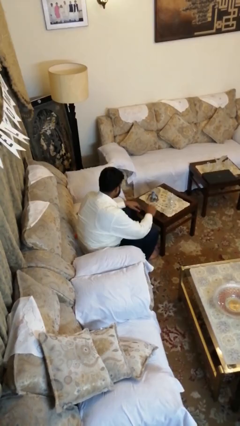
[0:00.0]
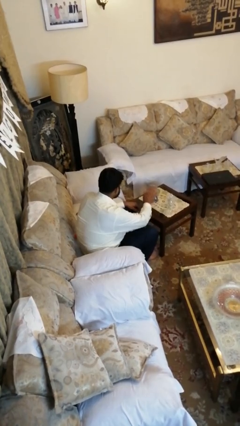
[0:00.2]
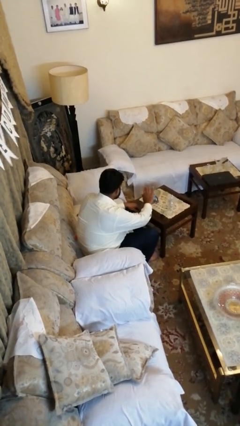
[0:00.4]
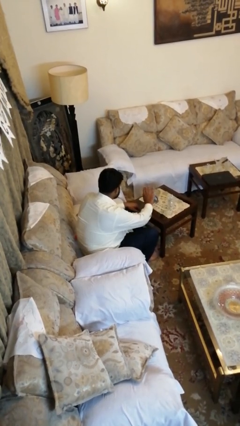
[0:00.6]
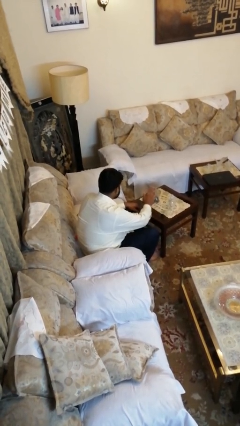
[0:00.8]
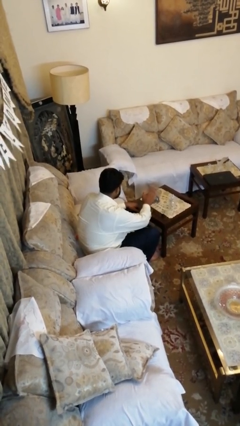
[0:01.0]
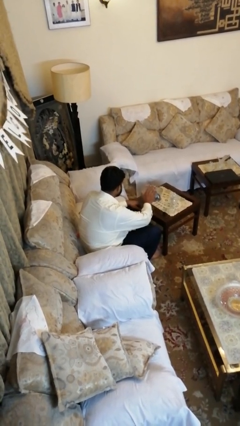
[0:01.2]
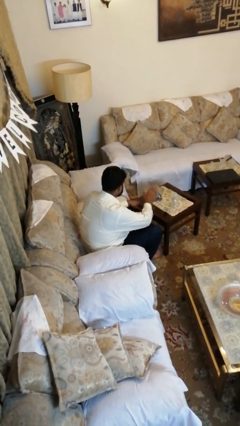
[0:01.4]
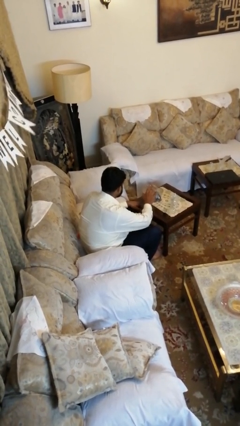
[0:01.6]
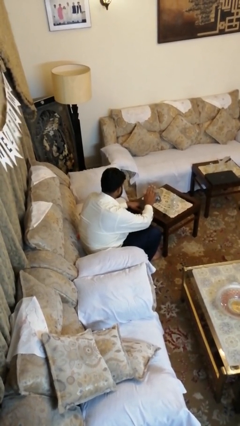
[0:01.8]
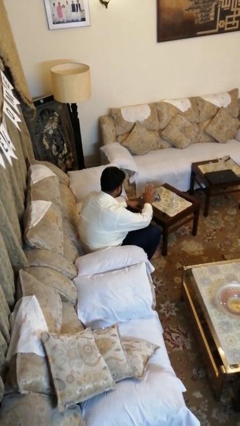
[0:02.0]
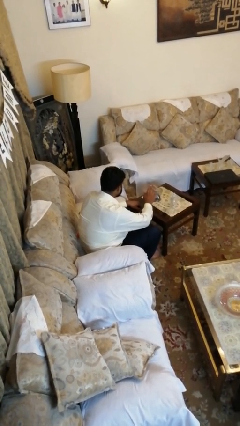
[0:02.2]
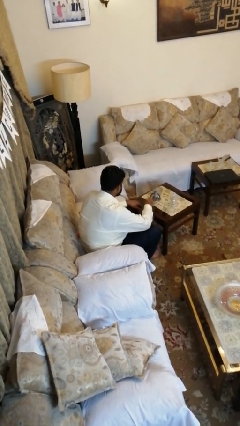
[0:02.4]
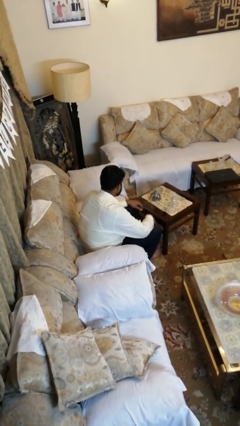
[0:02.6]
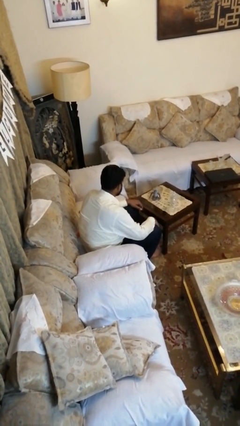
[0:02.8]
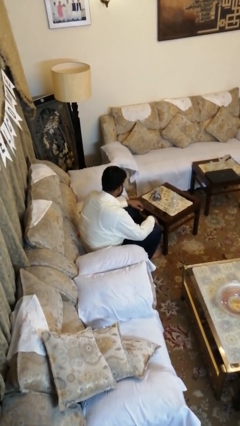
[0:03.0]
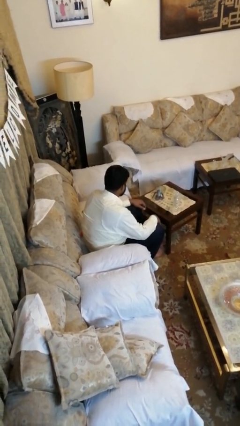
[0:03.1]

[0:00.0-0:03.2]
person waves hand over object

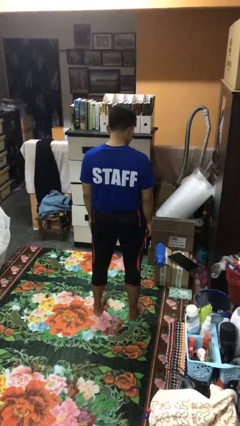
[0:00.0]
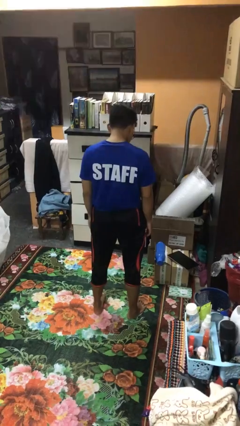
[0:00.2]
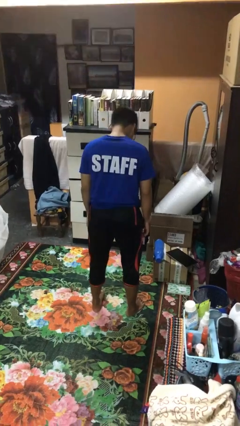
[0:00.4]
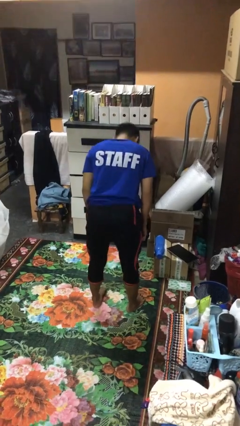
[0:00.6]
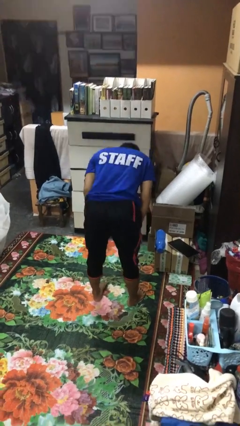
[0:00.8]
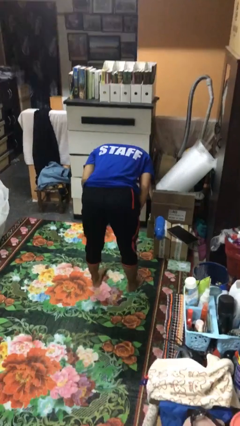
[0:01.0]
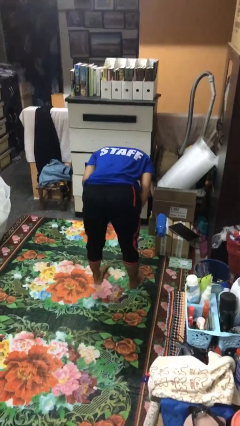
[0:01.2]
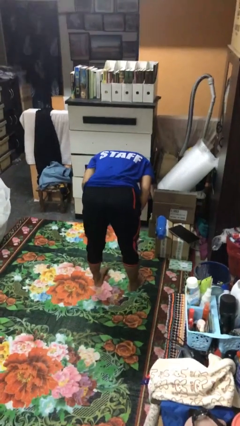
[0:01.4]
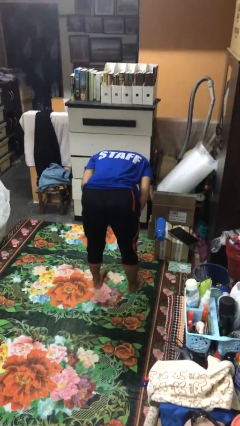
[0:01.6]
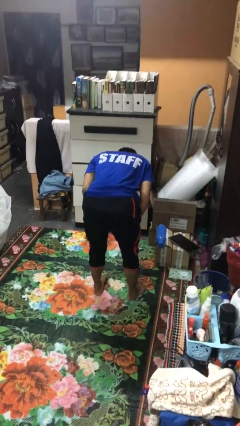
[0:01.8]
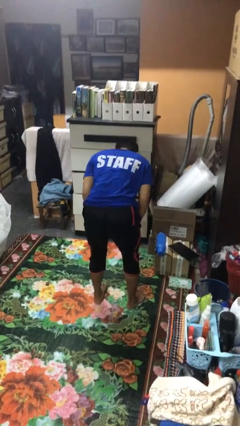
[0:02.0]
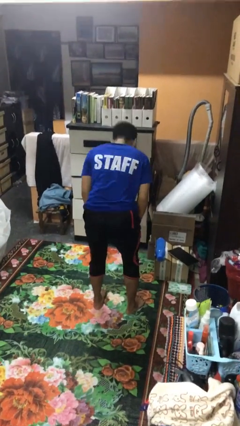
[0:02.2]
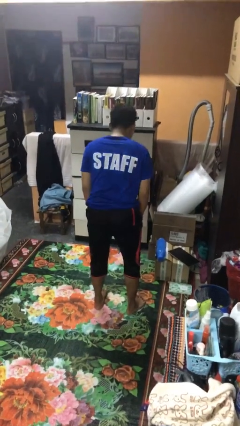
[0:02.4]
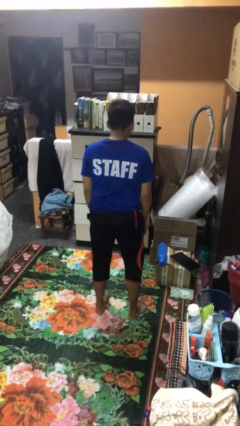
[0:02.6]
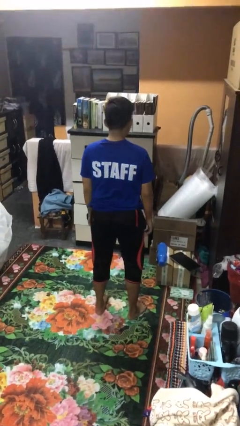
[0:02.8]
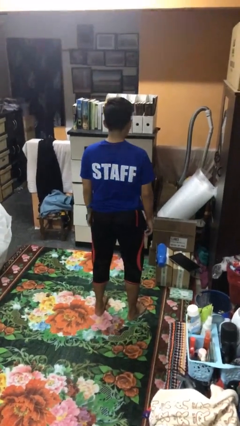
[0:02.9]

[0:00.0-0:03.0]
person bows

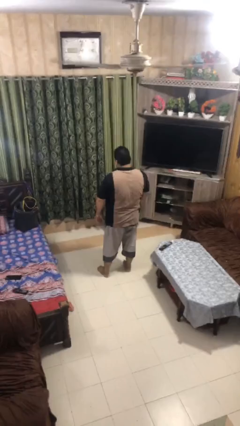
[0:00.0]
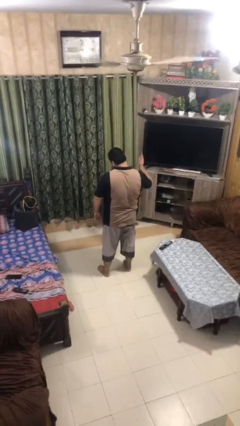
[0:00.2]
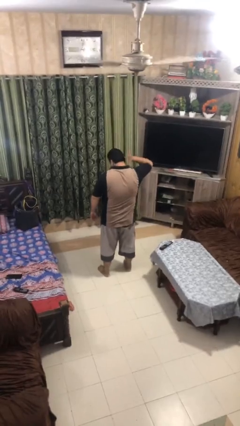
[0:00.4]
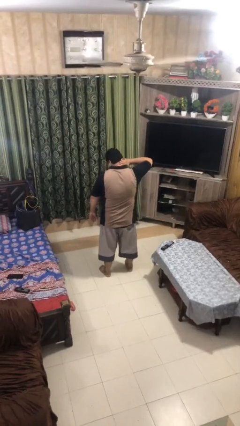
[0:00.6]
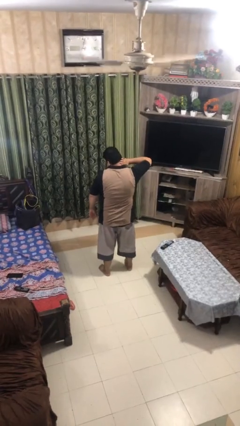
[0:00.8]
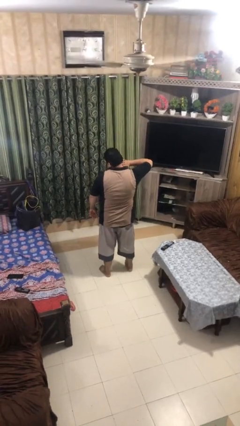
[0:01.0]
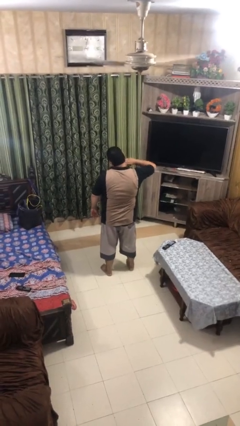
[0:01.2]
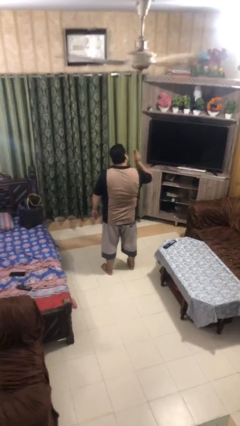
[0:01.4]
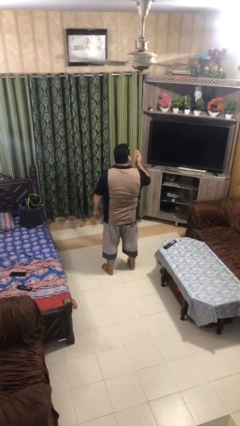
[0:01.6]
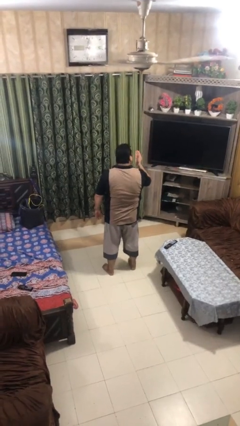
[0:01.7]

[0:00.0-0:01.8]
person swats bug

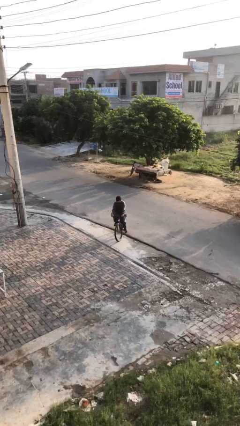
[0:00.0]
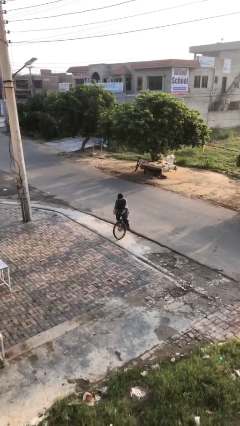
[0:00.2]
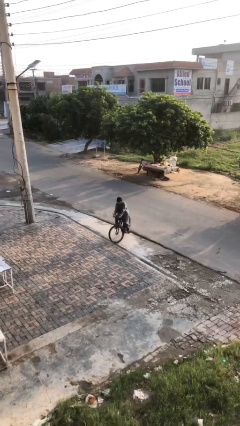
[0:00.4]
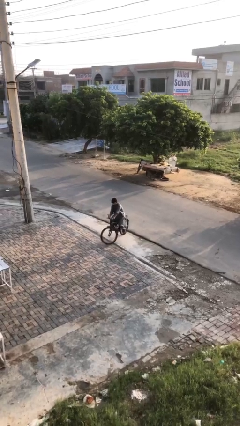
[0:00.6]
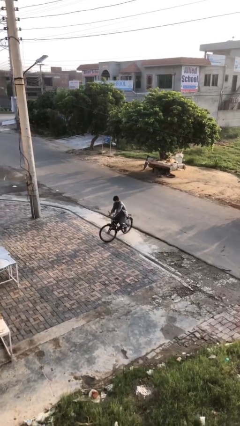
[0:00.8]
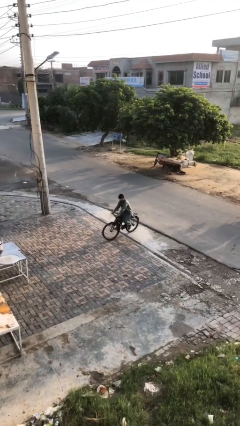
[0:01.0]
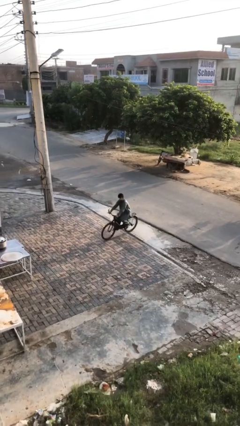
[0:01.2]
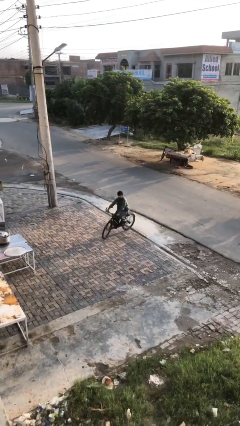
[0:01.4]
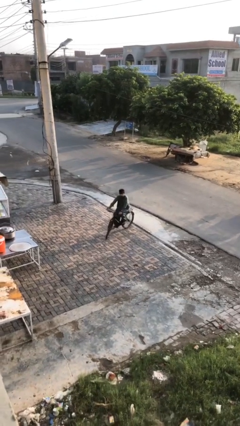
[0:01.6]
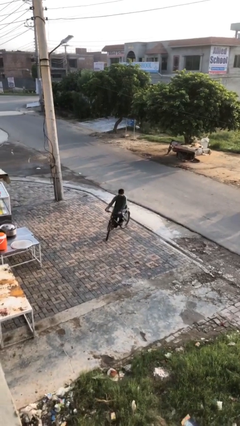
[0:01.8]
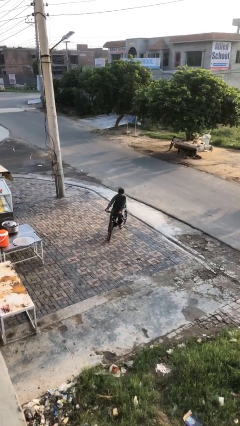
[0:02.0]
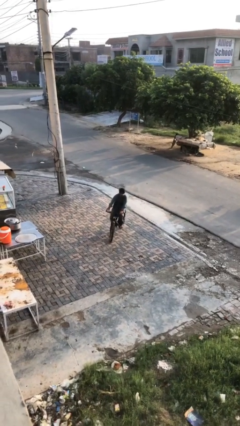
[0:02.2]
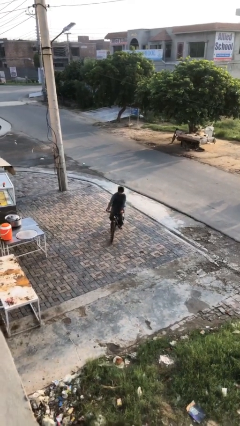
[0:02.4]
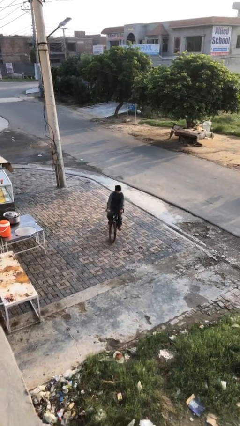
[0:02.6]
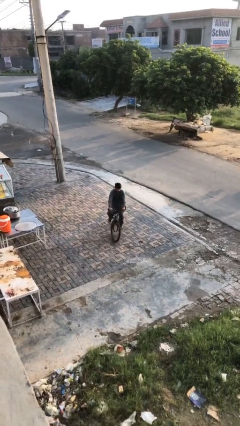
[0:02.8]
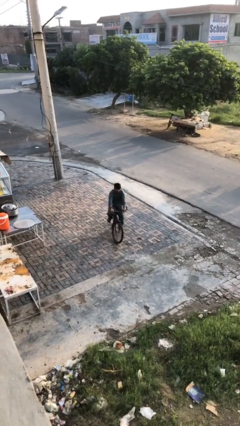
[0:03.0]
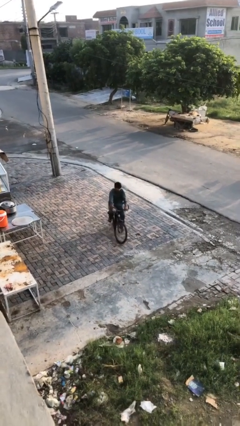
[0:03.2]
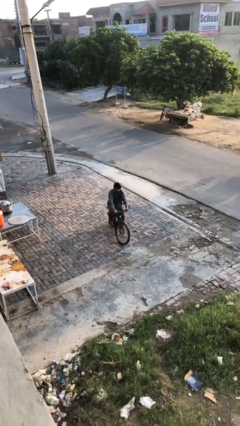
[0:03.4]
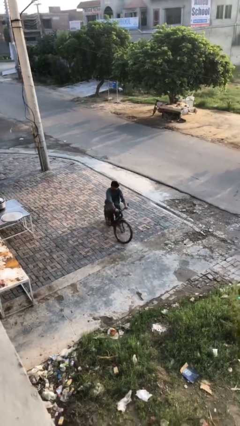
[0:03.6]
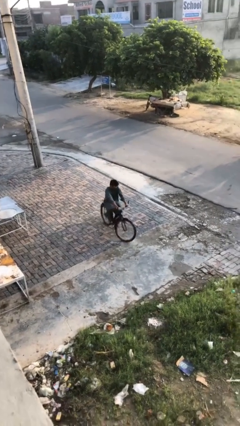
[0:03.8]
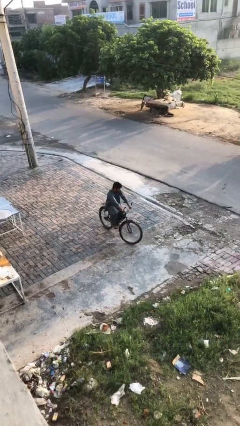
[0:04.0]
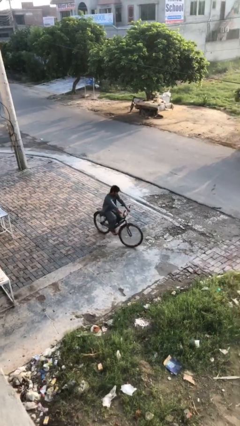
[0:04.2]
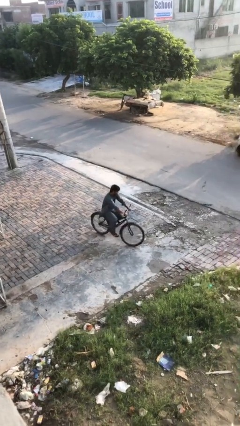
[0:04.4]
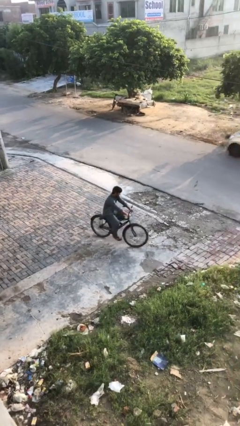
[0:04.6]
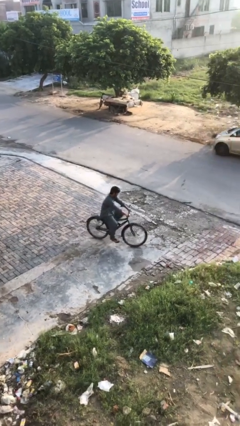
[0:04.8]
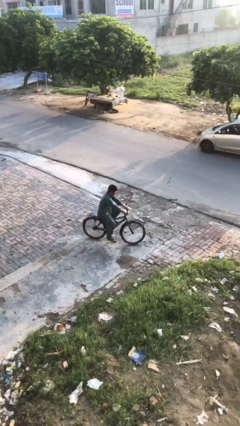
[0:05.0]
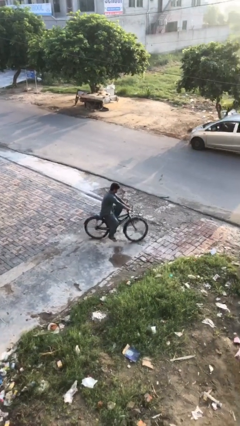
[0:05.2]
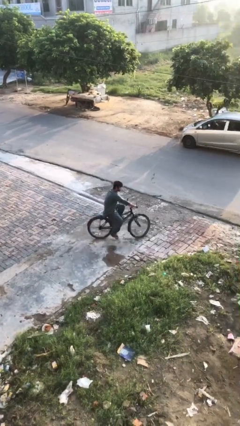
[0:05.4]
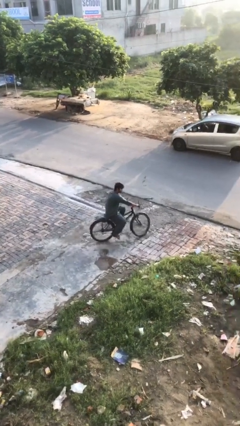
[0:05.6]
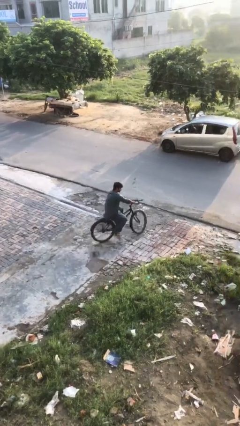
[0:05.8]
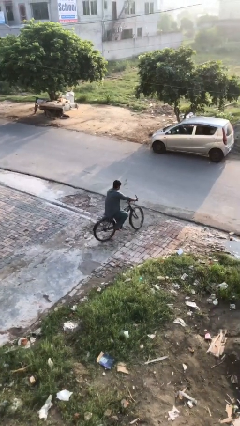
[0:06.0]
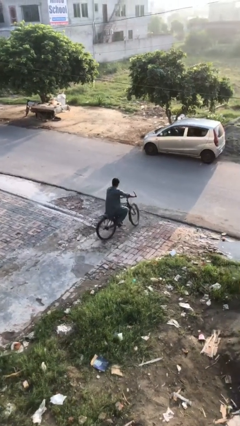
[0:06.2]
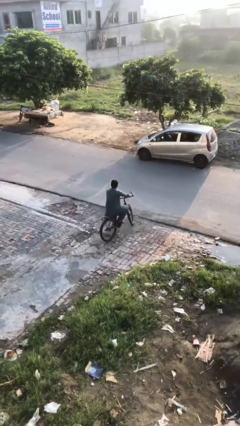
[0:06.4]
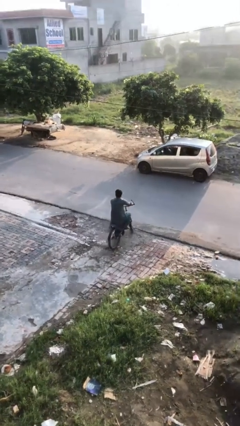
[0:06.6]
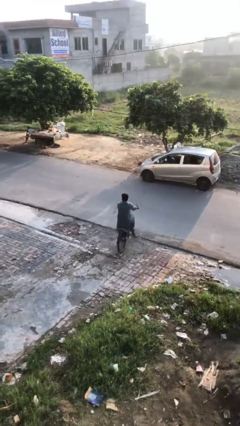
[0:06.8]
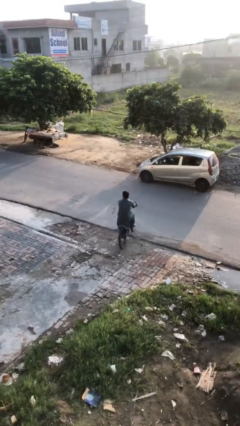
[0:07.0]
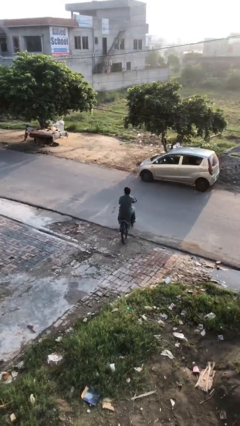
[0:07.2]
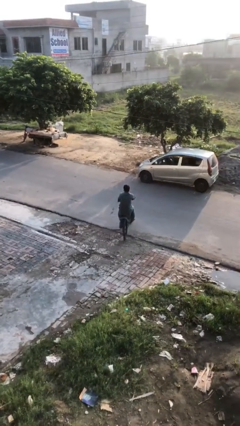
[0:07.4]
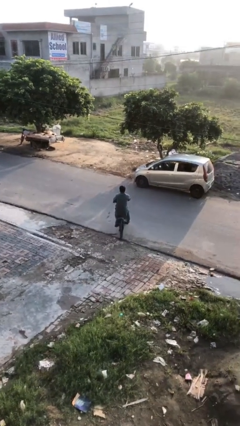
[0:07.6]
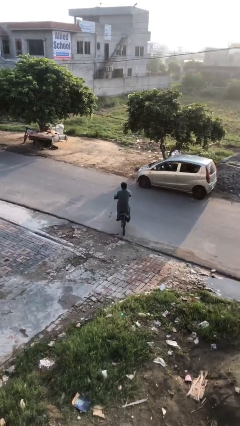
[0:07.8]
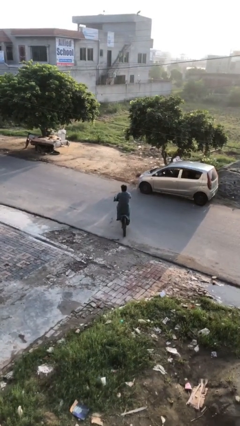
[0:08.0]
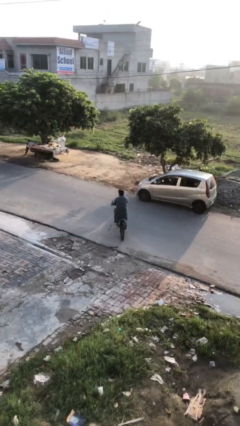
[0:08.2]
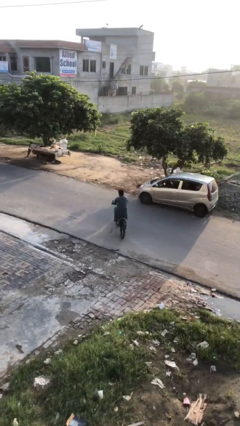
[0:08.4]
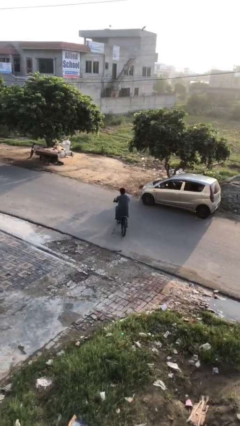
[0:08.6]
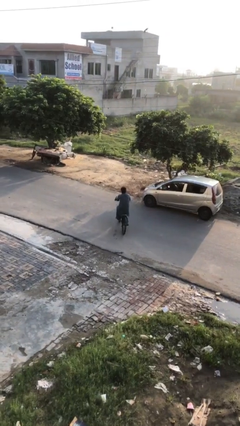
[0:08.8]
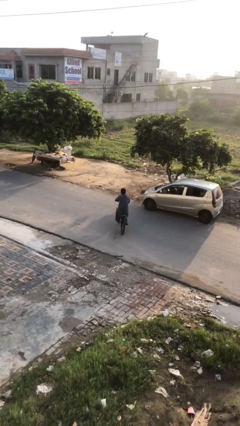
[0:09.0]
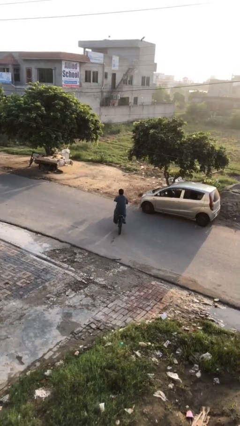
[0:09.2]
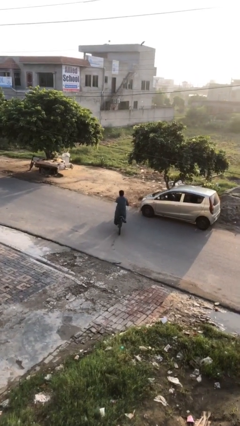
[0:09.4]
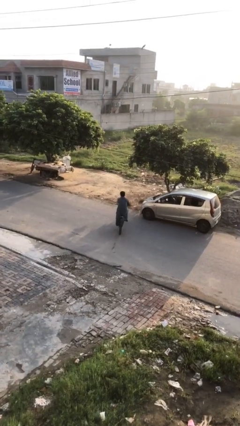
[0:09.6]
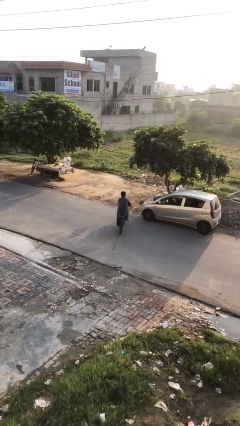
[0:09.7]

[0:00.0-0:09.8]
person rides bicycle
